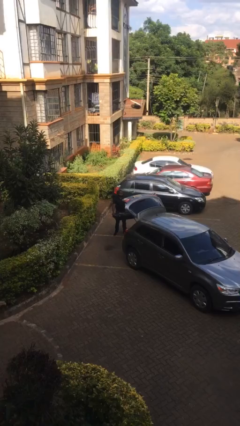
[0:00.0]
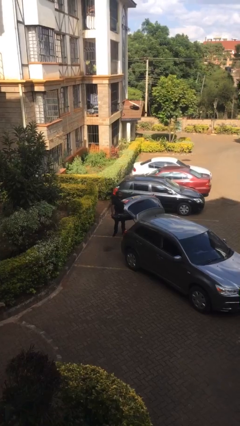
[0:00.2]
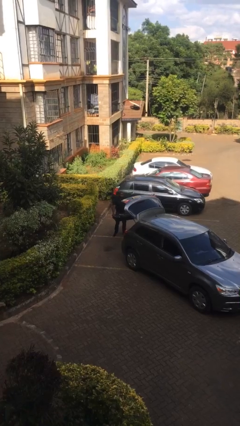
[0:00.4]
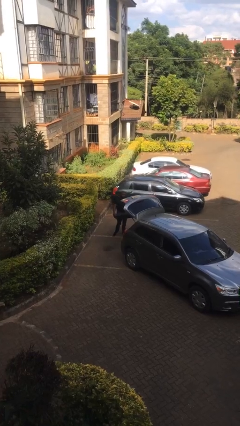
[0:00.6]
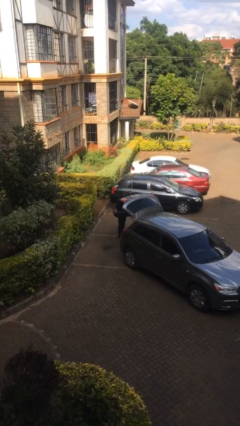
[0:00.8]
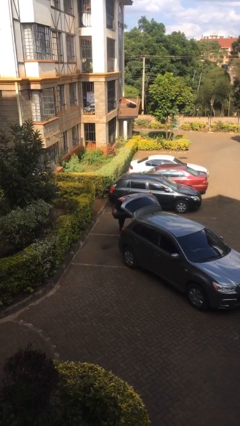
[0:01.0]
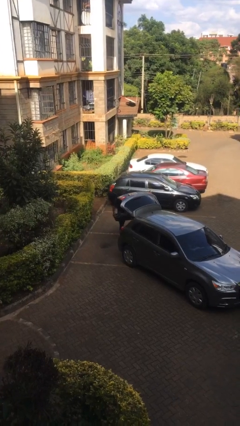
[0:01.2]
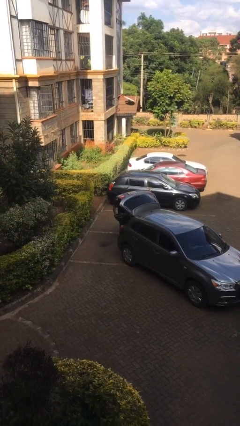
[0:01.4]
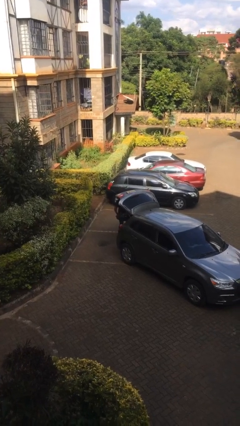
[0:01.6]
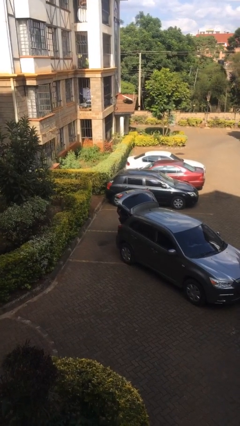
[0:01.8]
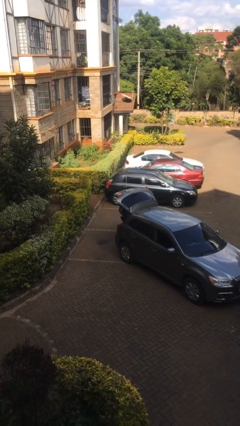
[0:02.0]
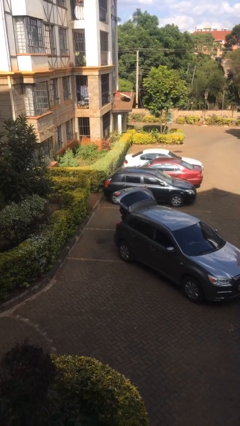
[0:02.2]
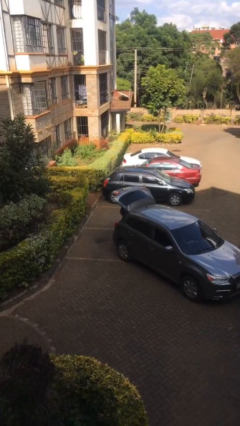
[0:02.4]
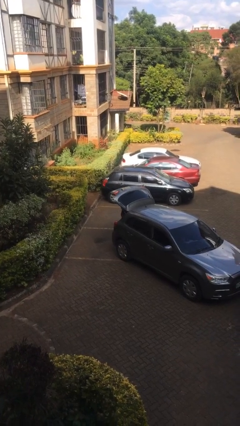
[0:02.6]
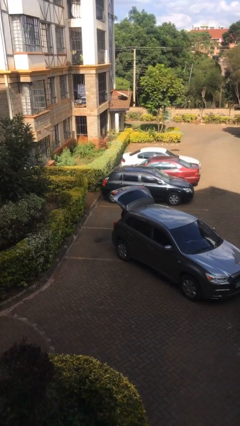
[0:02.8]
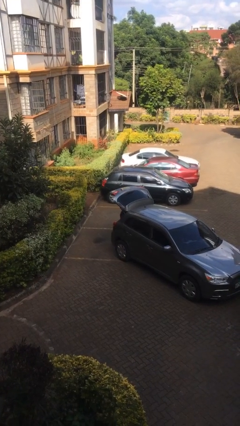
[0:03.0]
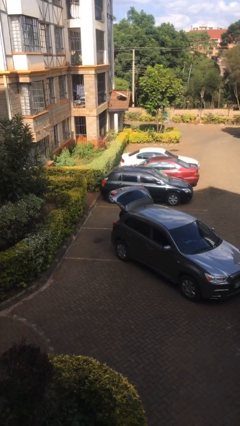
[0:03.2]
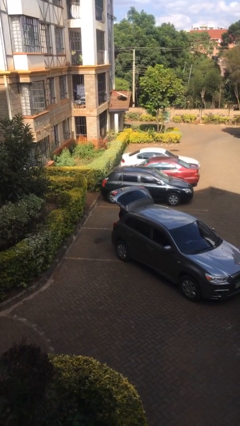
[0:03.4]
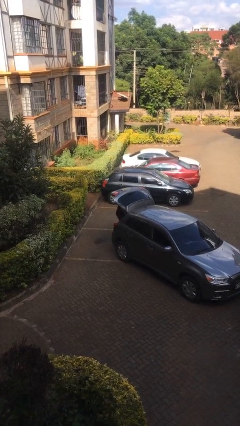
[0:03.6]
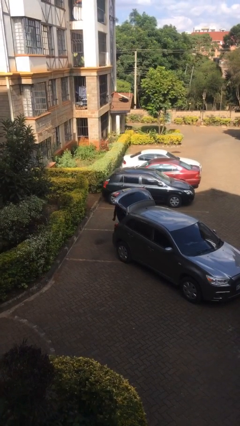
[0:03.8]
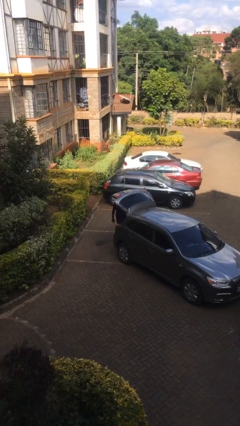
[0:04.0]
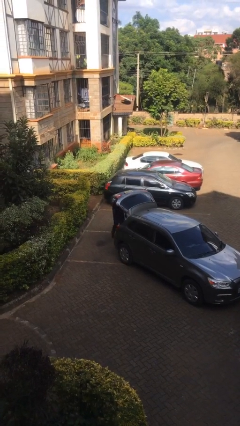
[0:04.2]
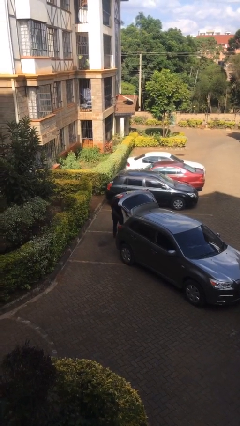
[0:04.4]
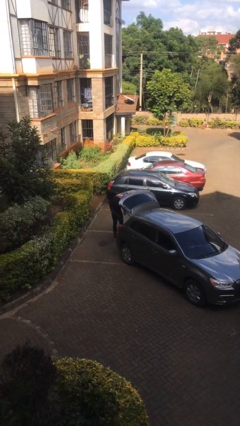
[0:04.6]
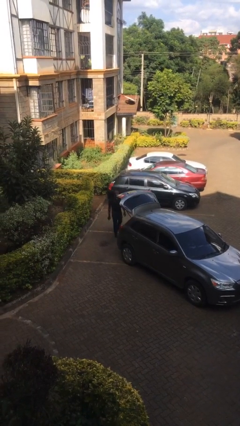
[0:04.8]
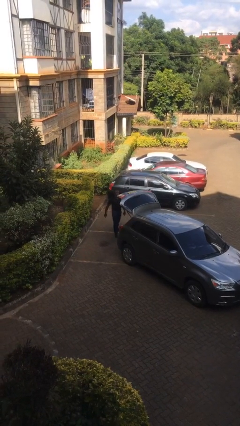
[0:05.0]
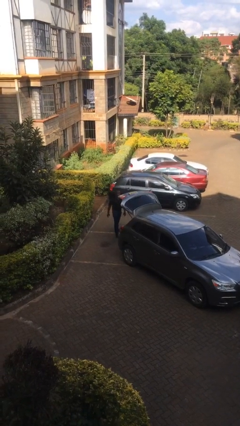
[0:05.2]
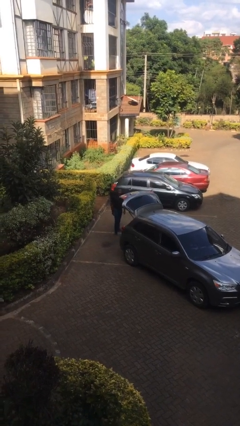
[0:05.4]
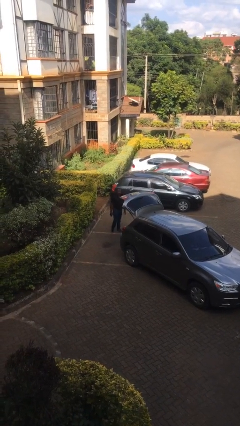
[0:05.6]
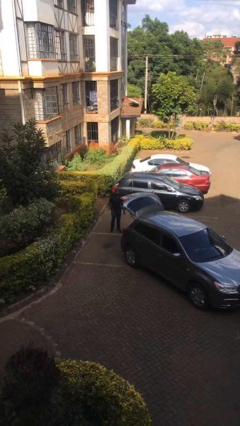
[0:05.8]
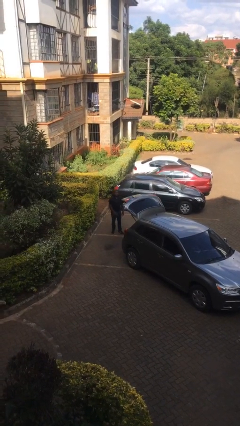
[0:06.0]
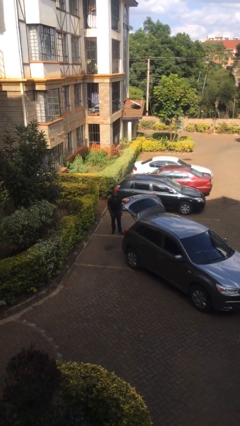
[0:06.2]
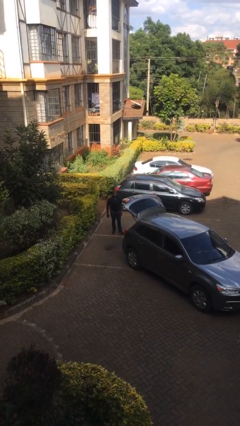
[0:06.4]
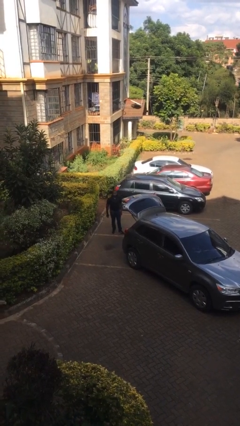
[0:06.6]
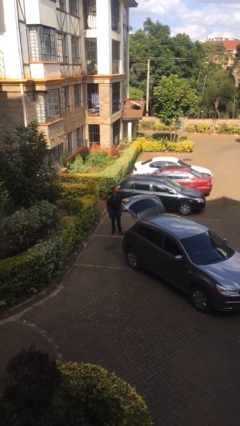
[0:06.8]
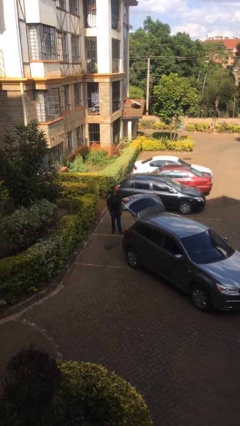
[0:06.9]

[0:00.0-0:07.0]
person loads car

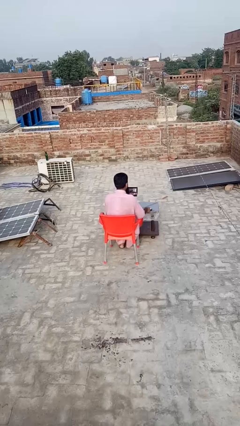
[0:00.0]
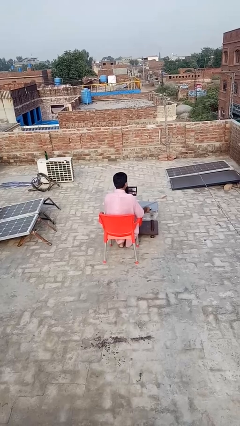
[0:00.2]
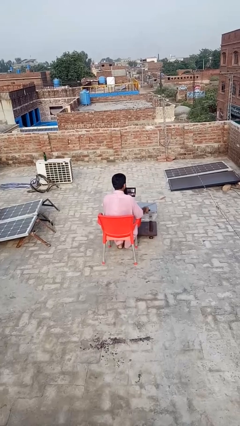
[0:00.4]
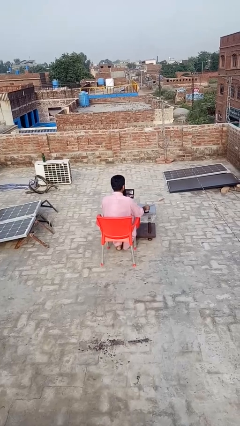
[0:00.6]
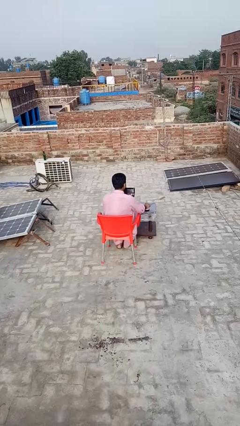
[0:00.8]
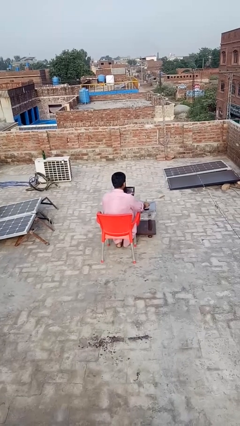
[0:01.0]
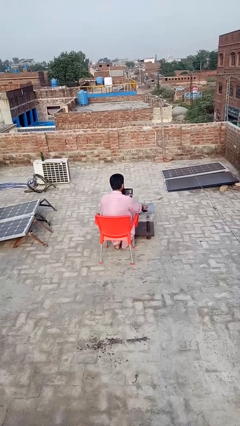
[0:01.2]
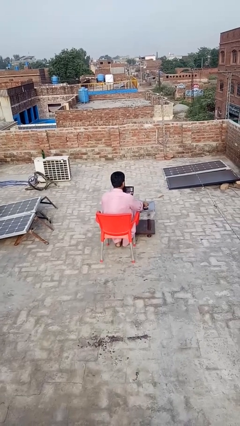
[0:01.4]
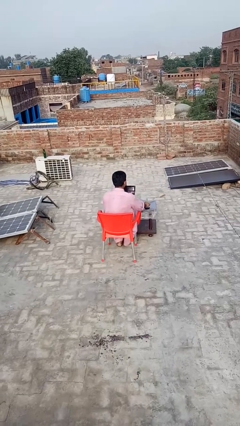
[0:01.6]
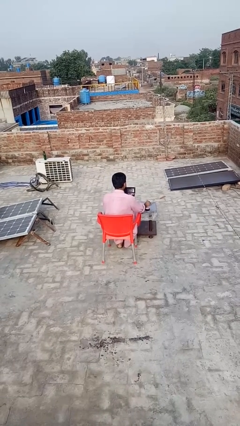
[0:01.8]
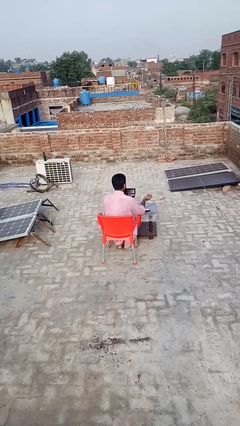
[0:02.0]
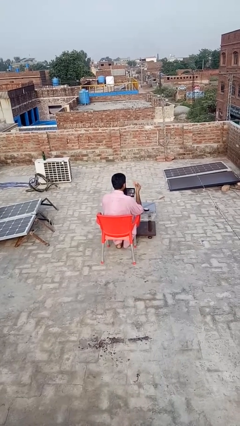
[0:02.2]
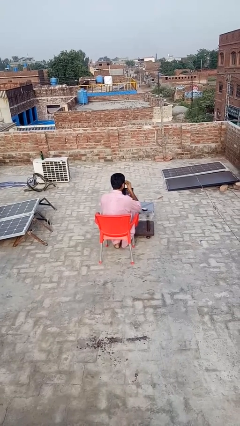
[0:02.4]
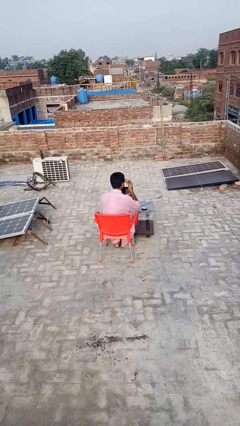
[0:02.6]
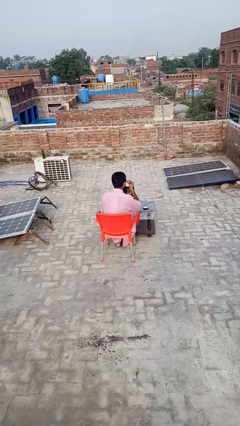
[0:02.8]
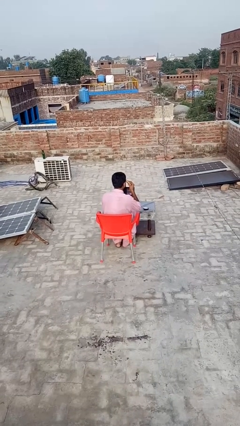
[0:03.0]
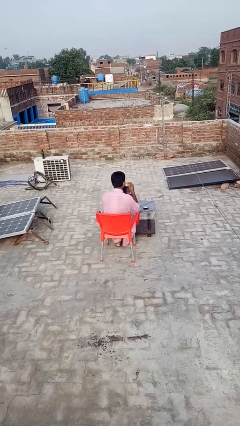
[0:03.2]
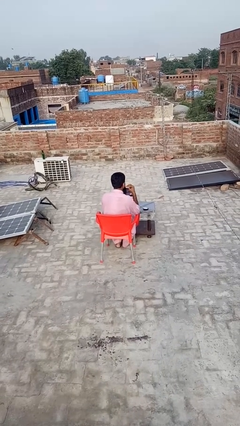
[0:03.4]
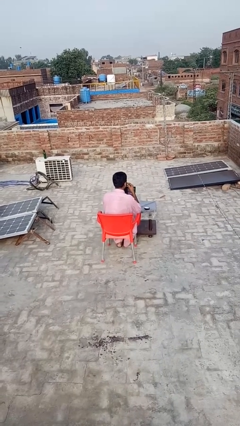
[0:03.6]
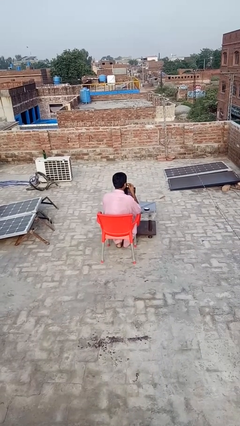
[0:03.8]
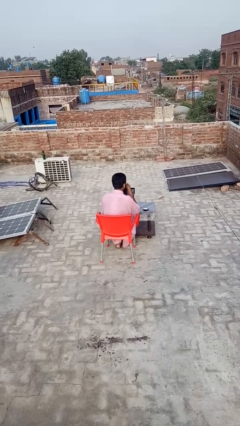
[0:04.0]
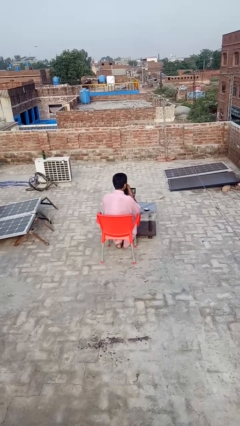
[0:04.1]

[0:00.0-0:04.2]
person applies foundation makeup

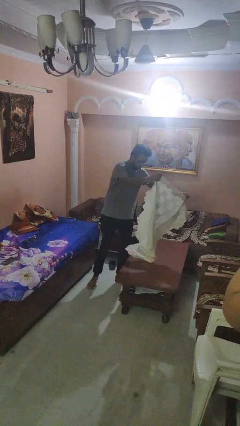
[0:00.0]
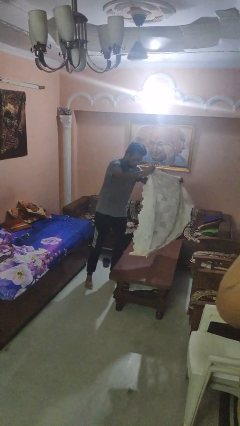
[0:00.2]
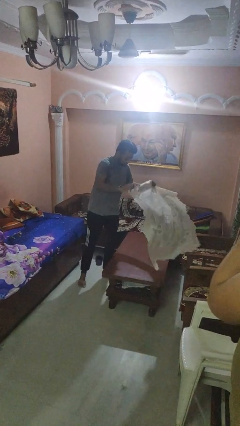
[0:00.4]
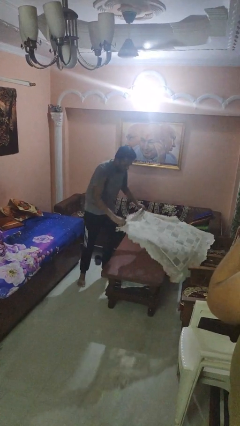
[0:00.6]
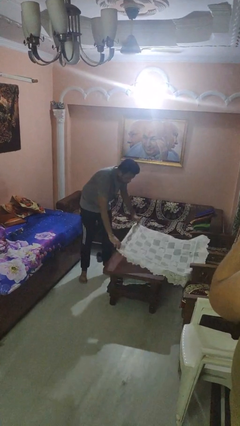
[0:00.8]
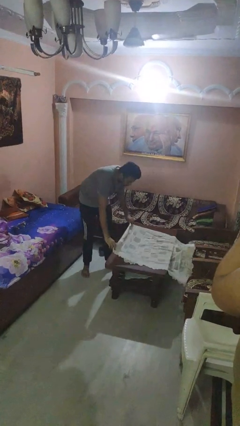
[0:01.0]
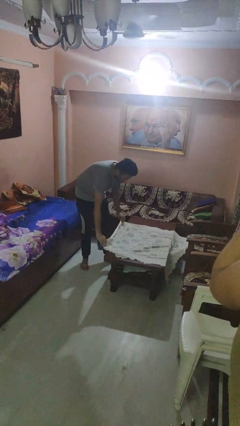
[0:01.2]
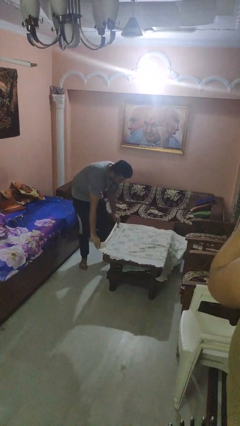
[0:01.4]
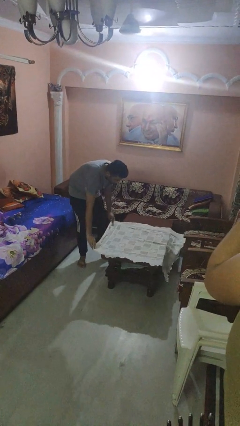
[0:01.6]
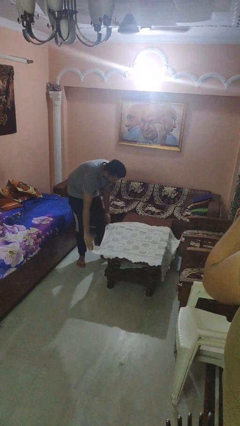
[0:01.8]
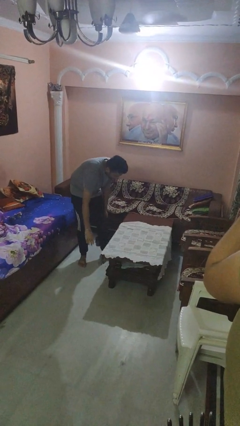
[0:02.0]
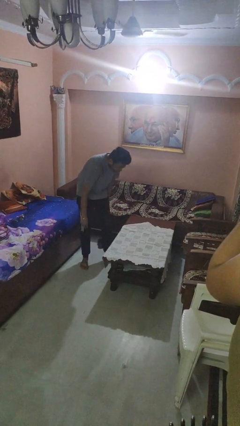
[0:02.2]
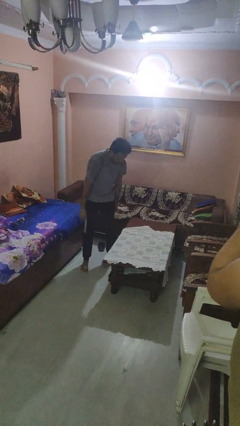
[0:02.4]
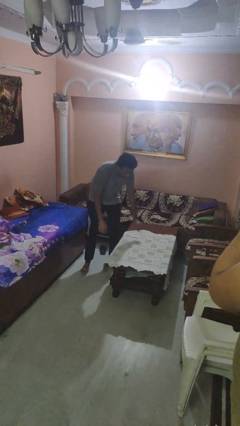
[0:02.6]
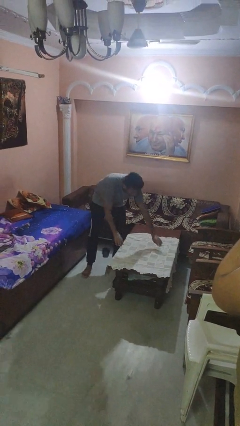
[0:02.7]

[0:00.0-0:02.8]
person spreads tablecloth

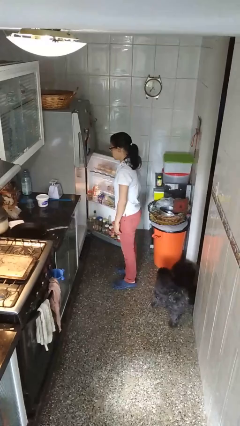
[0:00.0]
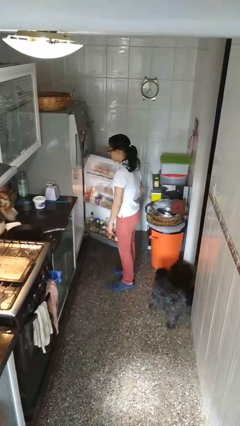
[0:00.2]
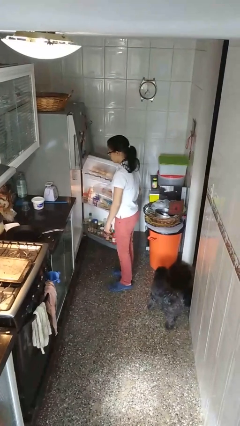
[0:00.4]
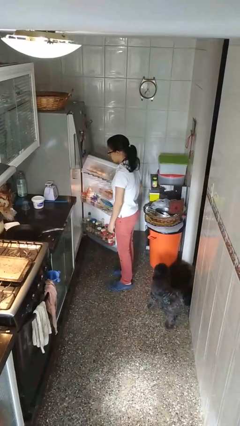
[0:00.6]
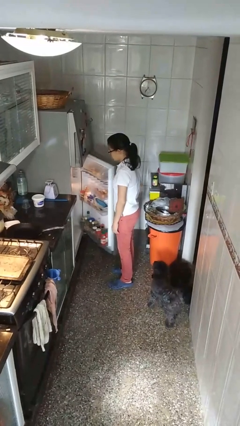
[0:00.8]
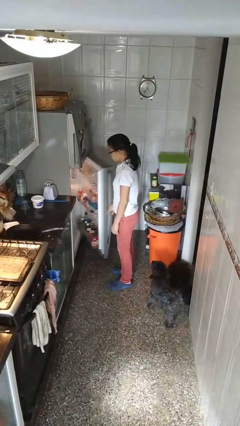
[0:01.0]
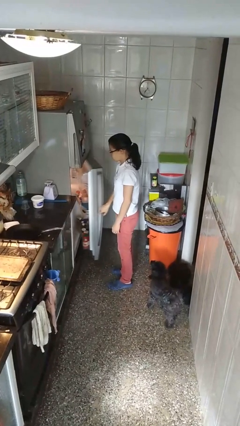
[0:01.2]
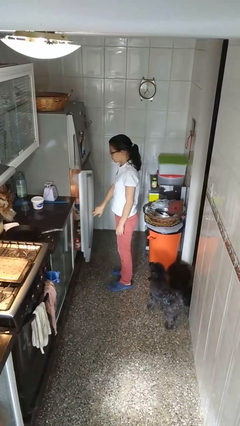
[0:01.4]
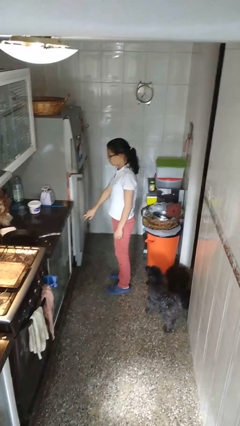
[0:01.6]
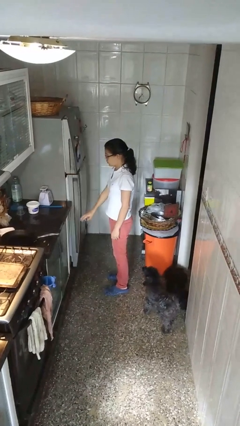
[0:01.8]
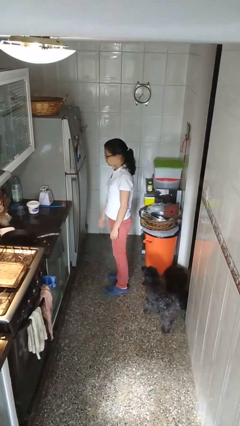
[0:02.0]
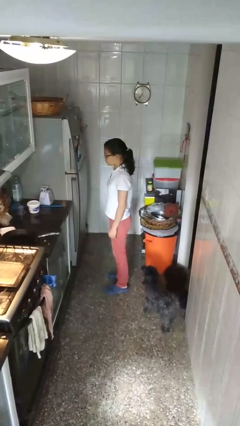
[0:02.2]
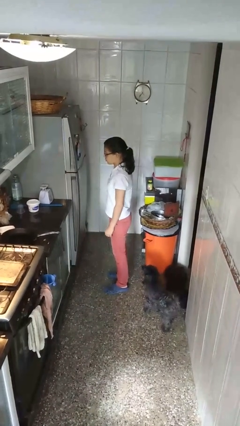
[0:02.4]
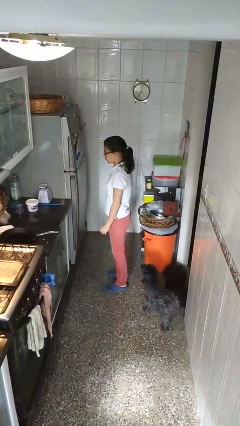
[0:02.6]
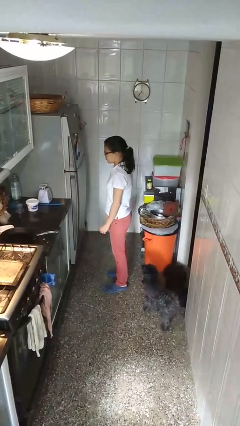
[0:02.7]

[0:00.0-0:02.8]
person closes refrigerator

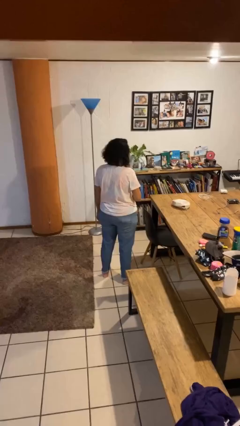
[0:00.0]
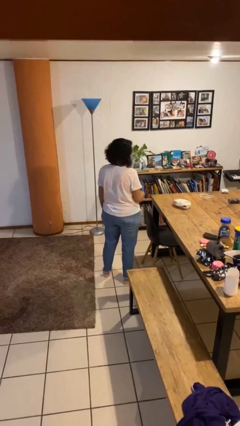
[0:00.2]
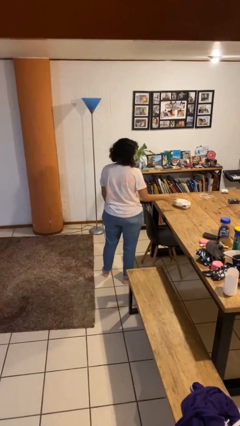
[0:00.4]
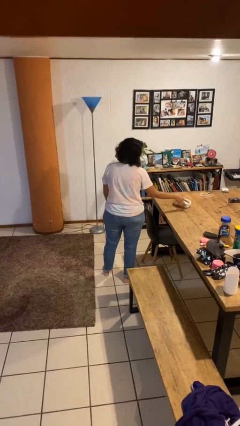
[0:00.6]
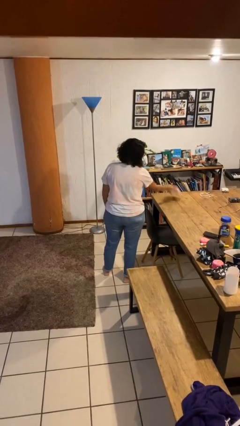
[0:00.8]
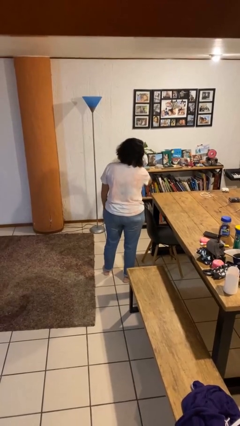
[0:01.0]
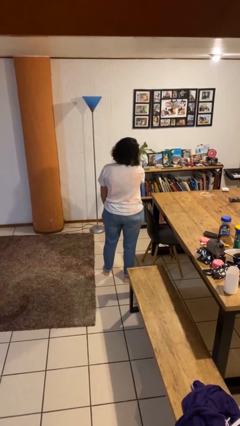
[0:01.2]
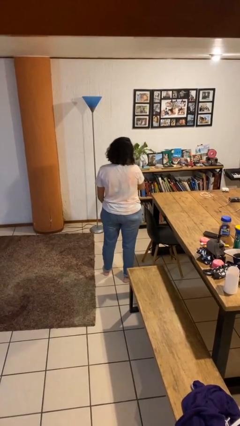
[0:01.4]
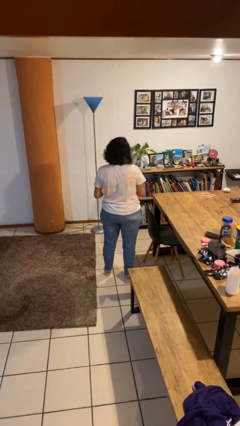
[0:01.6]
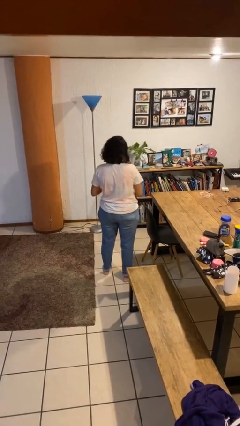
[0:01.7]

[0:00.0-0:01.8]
person picks up object from table
